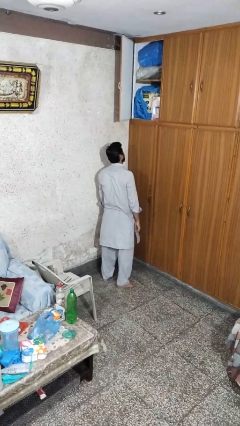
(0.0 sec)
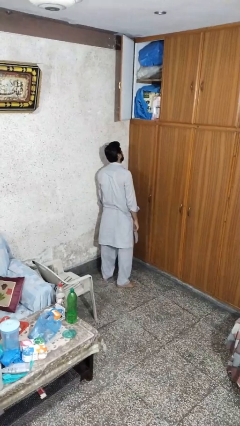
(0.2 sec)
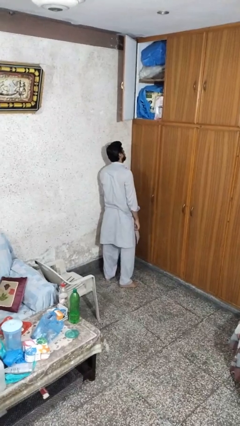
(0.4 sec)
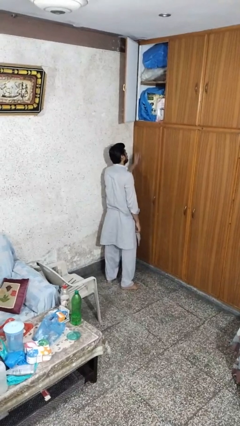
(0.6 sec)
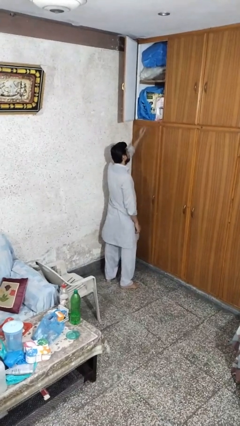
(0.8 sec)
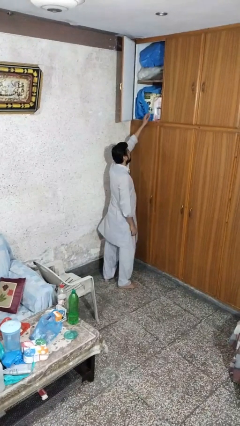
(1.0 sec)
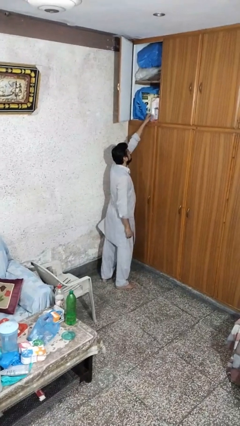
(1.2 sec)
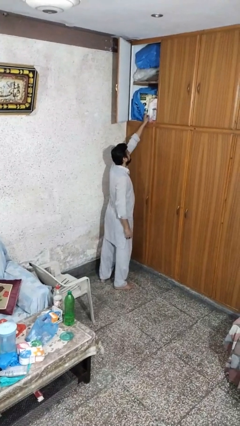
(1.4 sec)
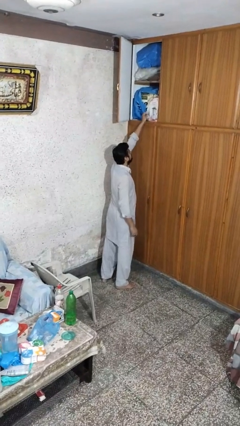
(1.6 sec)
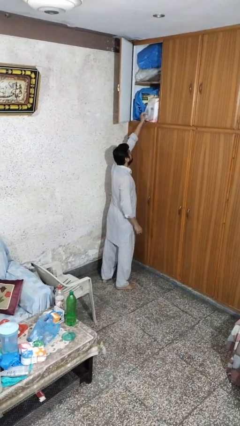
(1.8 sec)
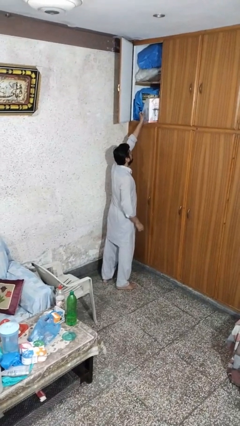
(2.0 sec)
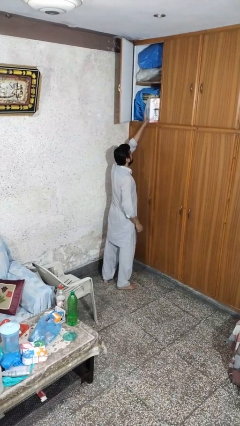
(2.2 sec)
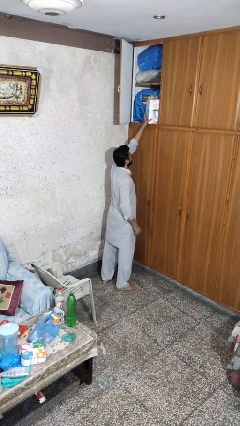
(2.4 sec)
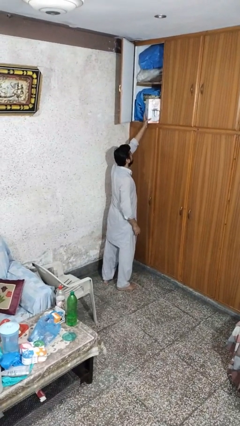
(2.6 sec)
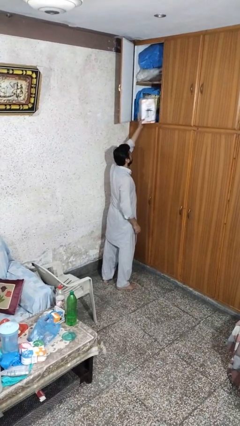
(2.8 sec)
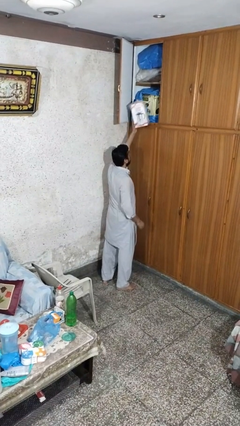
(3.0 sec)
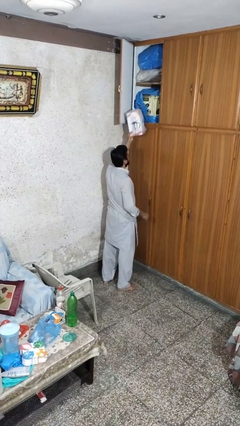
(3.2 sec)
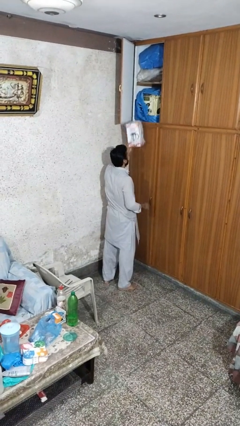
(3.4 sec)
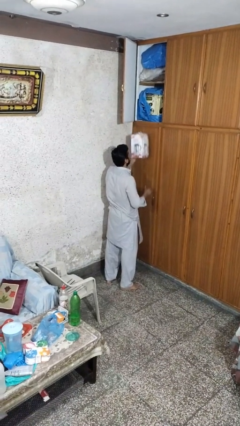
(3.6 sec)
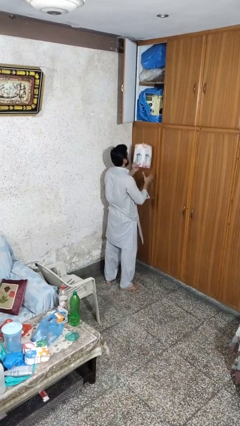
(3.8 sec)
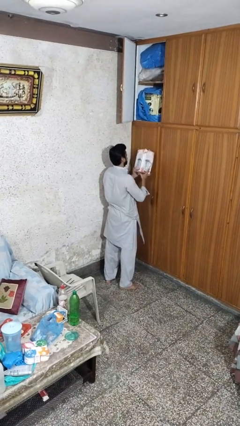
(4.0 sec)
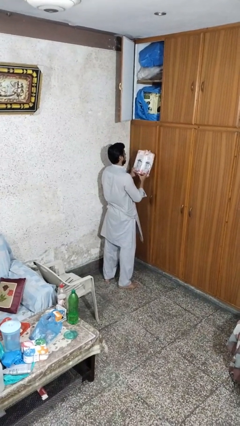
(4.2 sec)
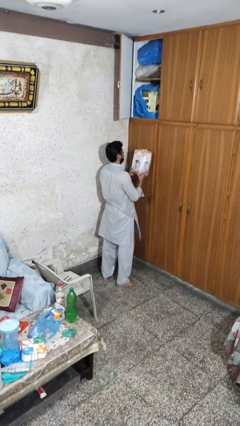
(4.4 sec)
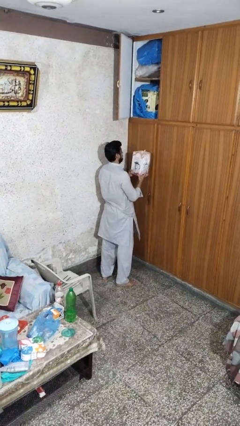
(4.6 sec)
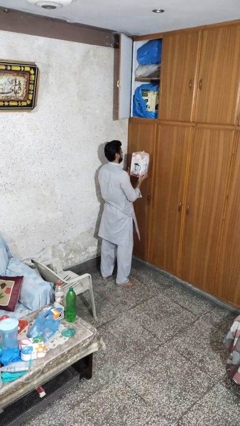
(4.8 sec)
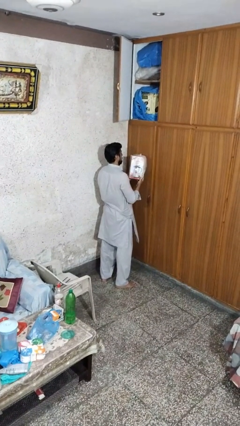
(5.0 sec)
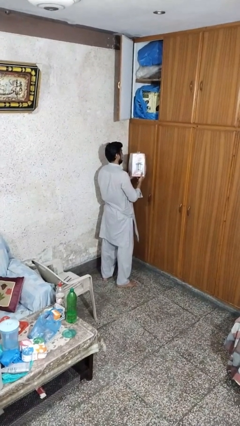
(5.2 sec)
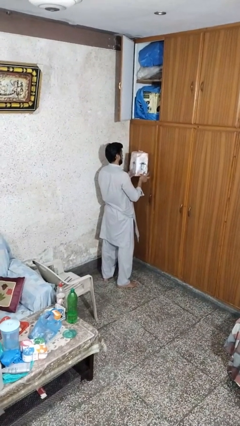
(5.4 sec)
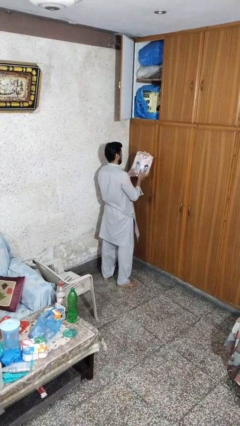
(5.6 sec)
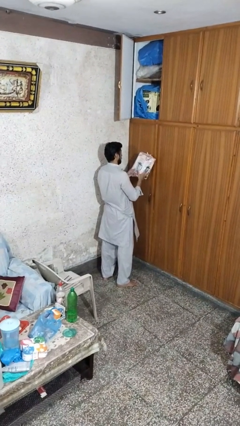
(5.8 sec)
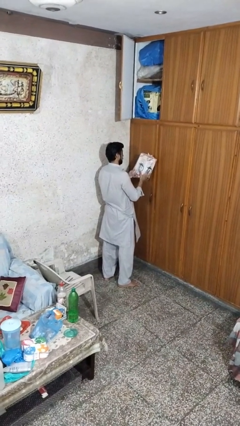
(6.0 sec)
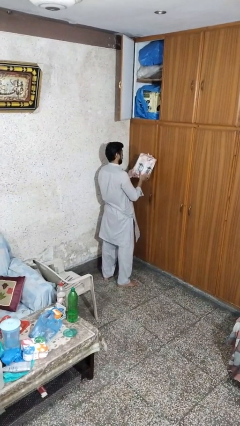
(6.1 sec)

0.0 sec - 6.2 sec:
person picks up object from countertop

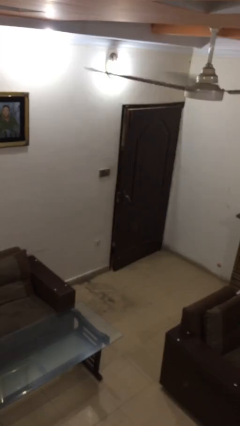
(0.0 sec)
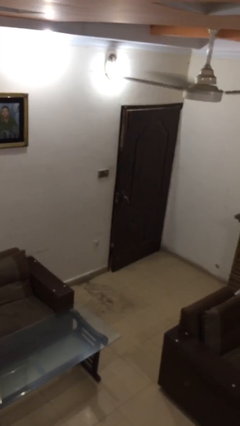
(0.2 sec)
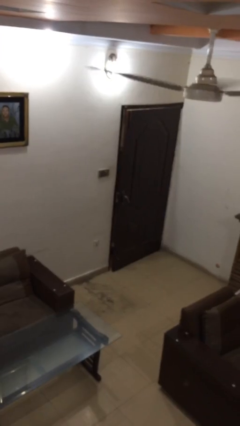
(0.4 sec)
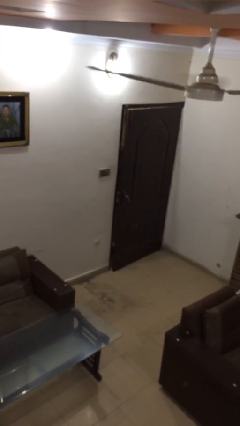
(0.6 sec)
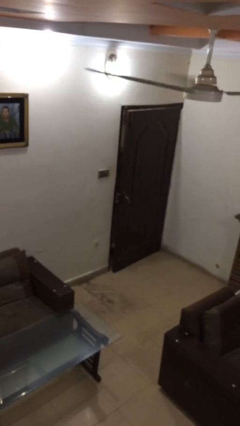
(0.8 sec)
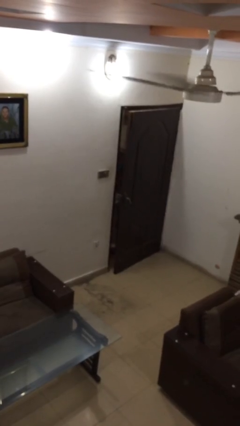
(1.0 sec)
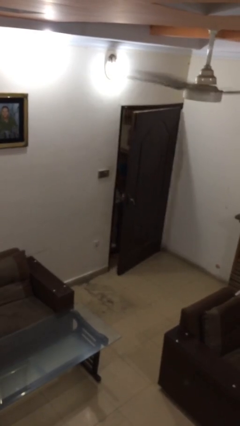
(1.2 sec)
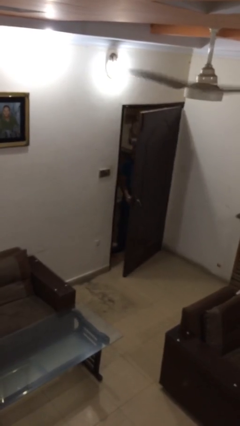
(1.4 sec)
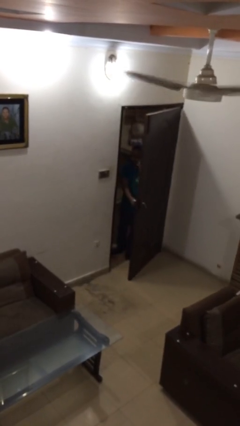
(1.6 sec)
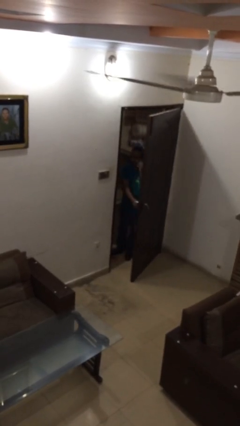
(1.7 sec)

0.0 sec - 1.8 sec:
person opens facility door

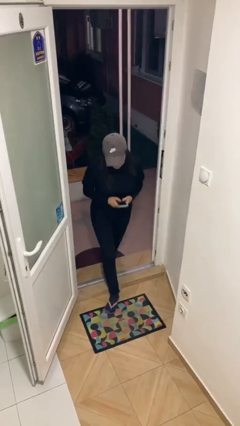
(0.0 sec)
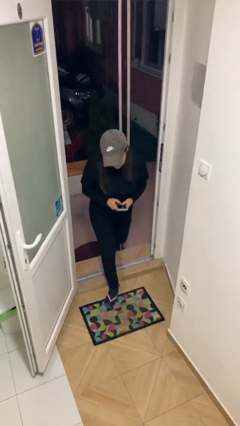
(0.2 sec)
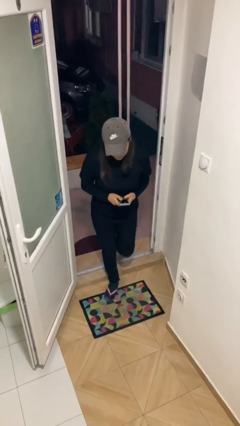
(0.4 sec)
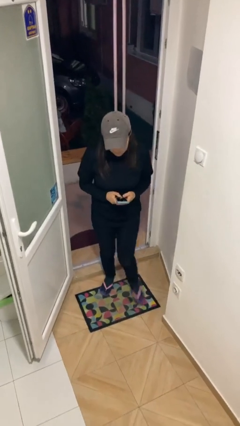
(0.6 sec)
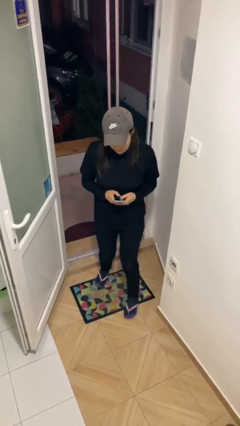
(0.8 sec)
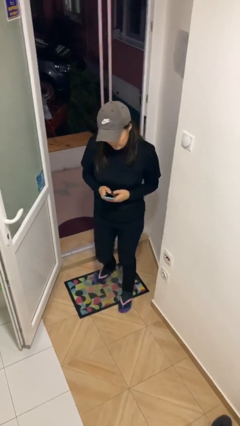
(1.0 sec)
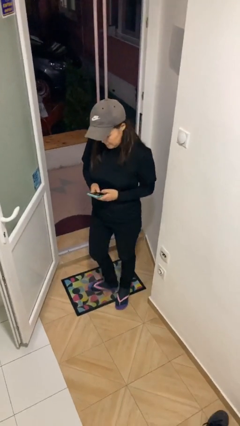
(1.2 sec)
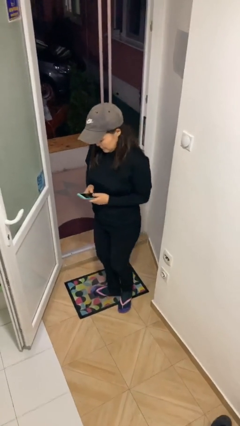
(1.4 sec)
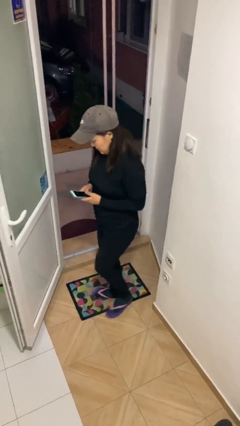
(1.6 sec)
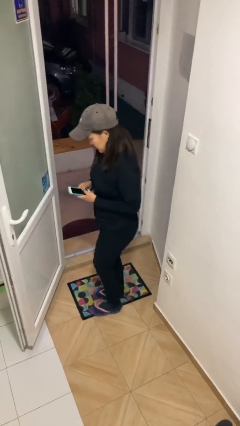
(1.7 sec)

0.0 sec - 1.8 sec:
person enters scene through structure

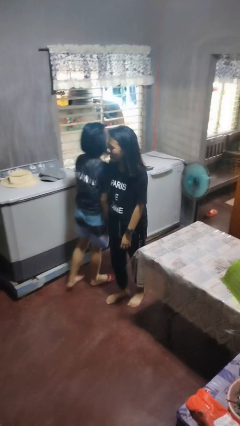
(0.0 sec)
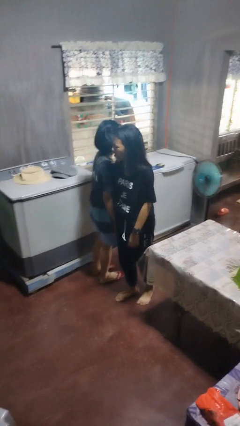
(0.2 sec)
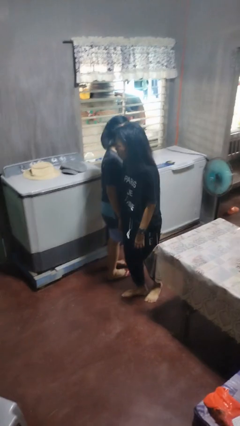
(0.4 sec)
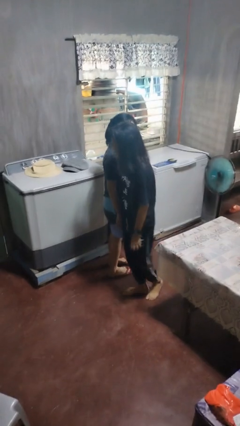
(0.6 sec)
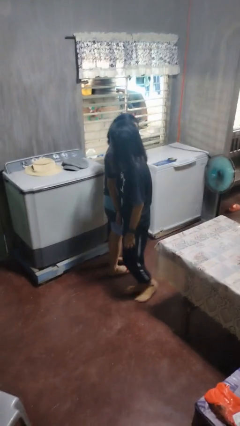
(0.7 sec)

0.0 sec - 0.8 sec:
person bumps into person

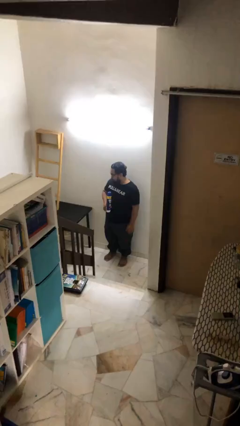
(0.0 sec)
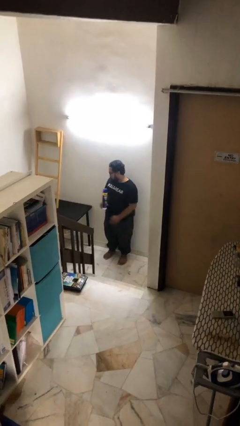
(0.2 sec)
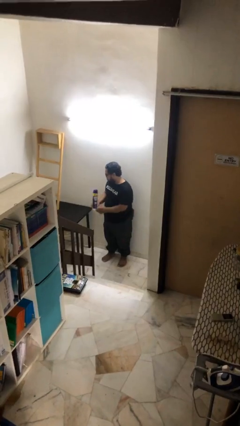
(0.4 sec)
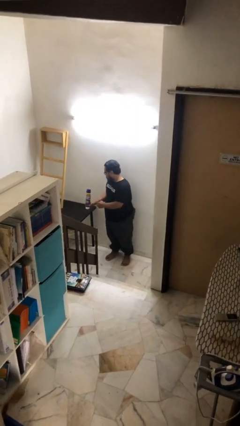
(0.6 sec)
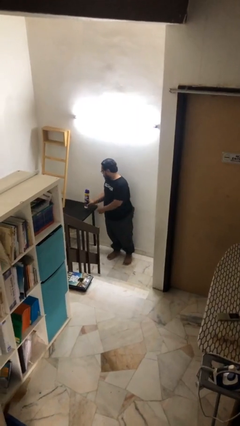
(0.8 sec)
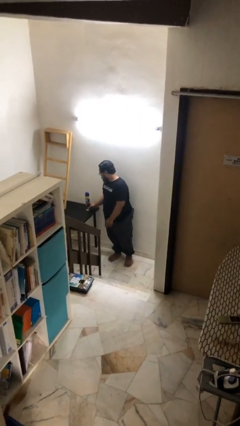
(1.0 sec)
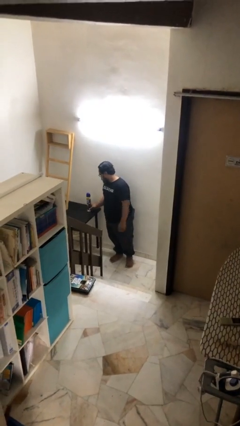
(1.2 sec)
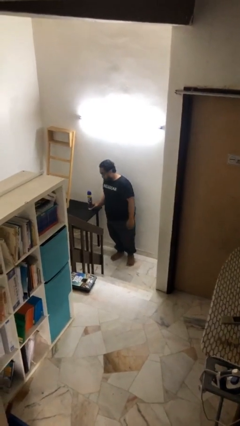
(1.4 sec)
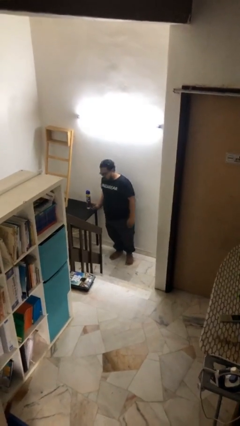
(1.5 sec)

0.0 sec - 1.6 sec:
person puts down object on table

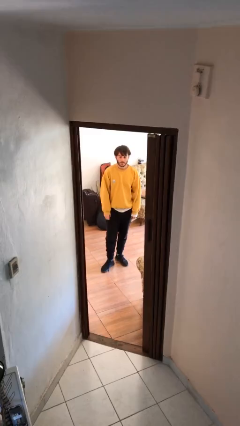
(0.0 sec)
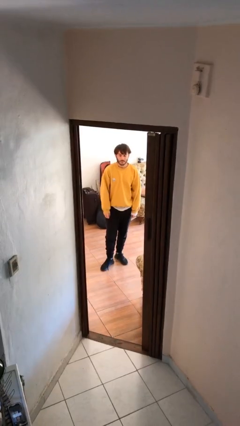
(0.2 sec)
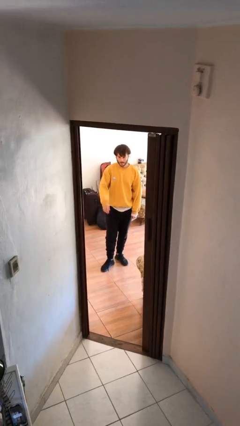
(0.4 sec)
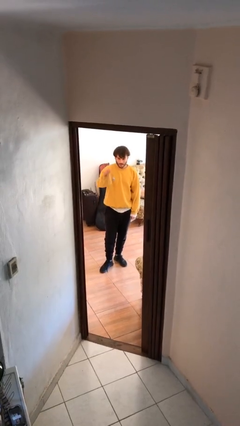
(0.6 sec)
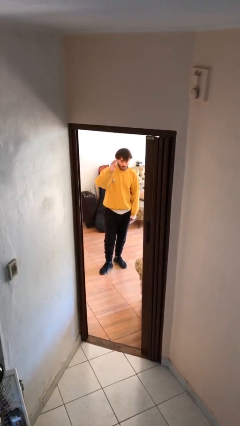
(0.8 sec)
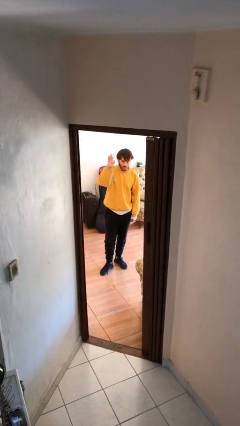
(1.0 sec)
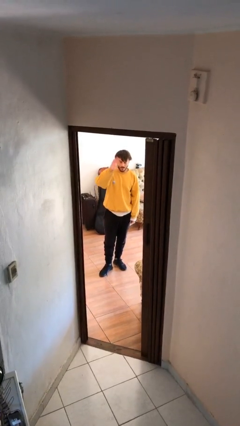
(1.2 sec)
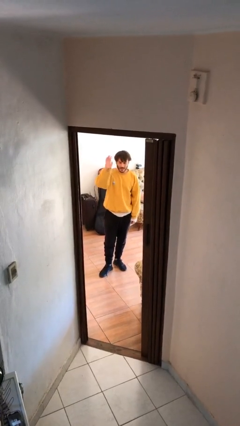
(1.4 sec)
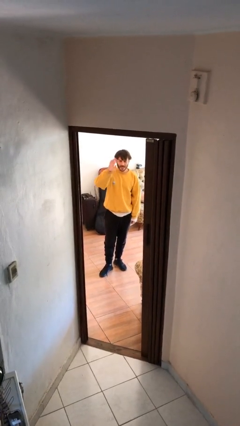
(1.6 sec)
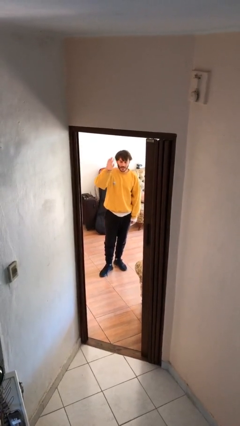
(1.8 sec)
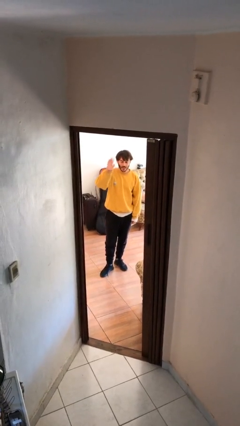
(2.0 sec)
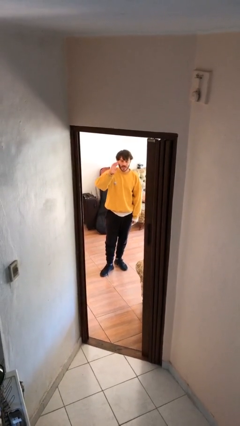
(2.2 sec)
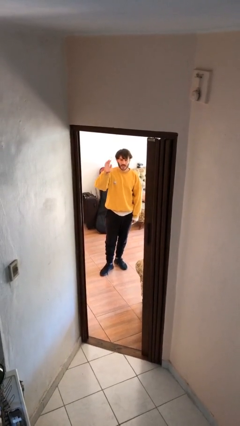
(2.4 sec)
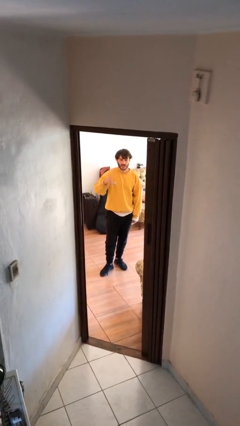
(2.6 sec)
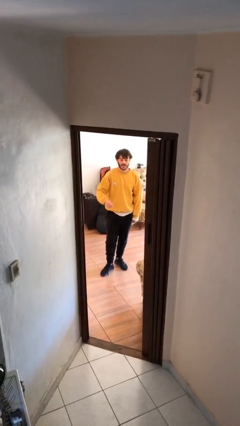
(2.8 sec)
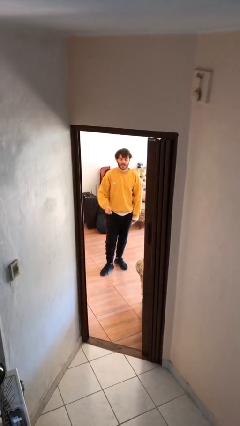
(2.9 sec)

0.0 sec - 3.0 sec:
person waves at person

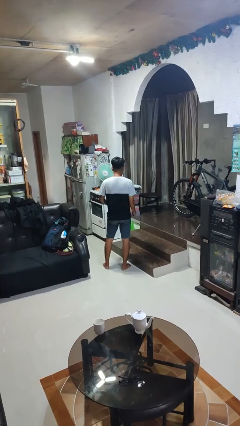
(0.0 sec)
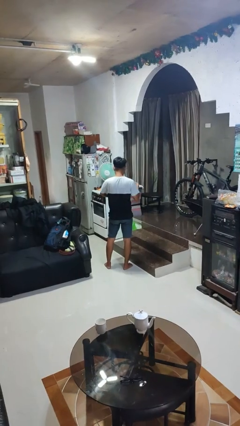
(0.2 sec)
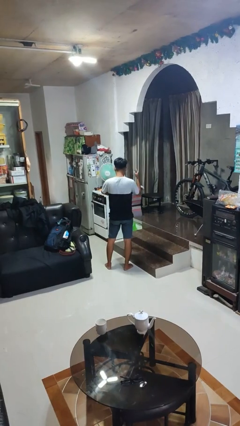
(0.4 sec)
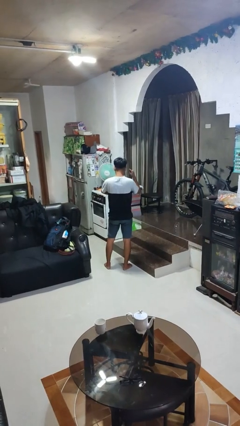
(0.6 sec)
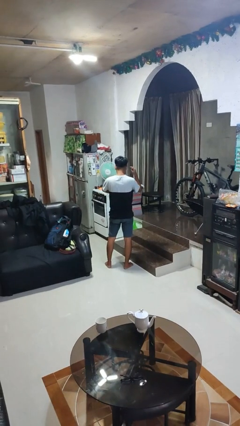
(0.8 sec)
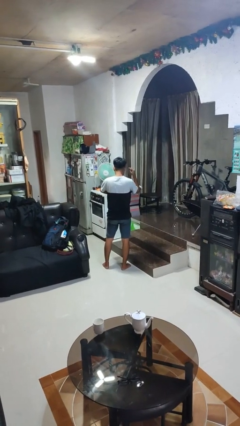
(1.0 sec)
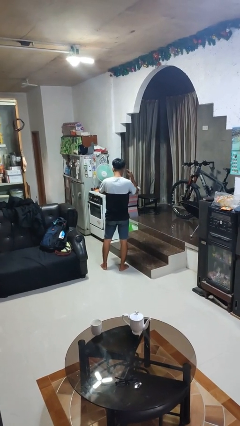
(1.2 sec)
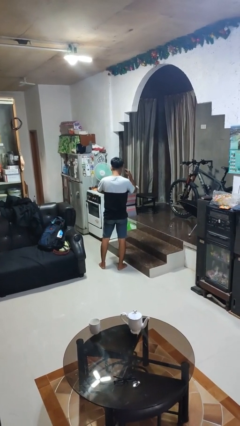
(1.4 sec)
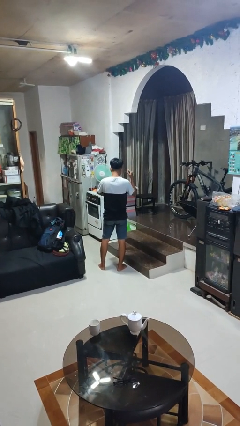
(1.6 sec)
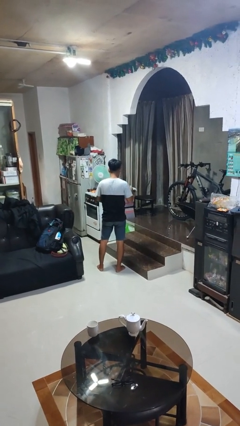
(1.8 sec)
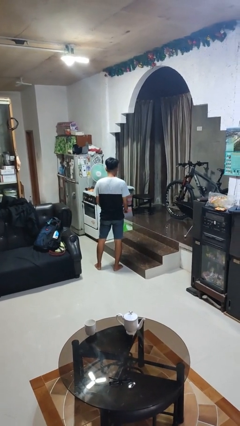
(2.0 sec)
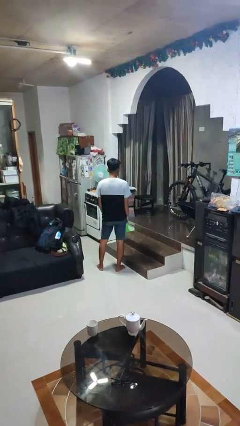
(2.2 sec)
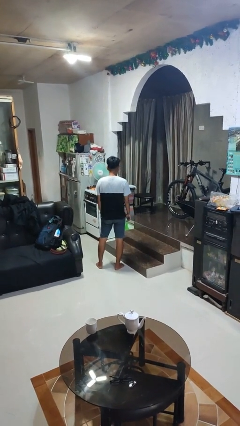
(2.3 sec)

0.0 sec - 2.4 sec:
person gestures listen closely
